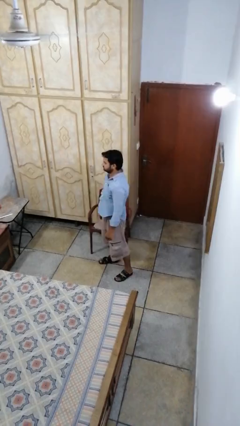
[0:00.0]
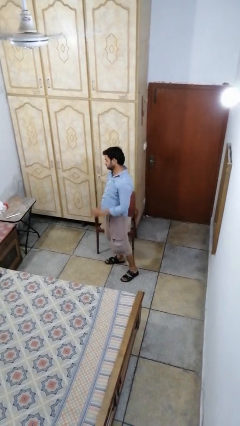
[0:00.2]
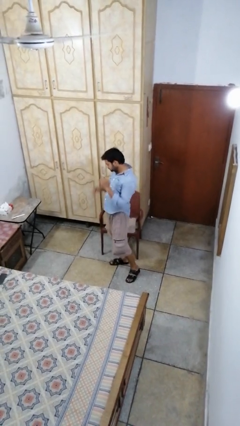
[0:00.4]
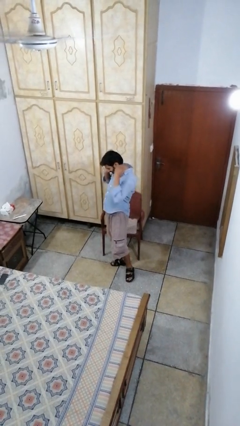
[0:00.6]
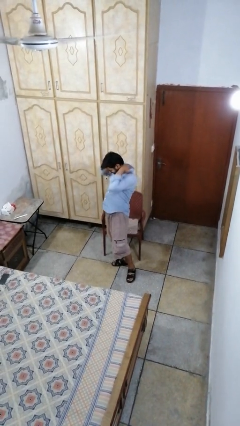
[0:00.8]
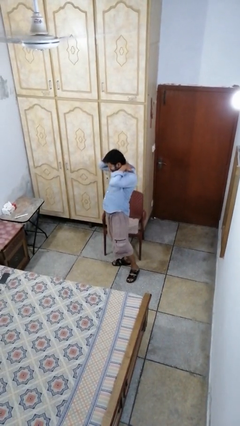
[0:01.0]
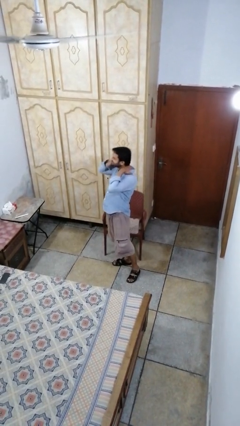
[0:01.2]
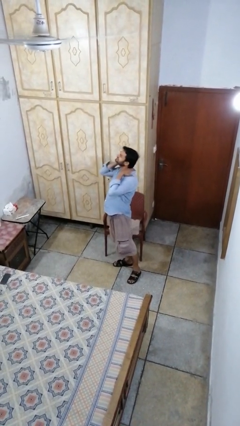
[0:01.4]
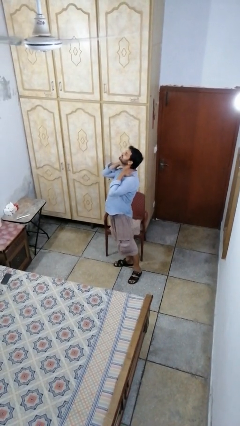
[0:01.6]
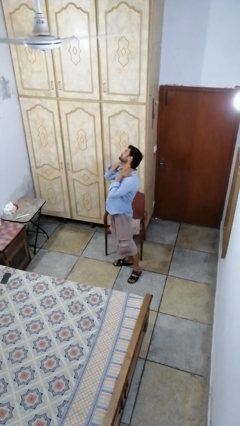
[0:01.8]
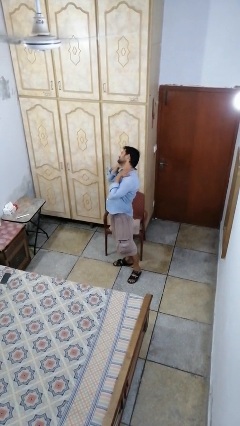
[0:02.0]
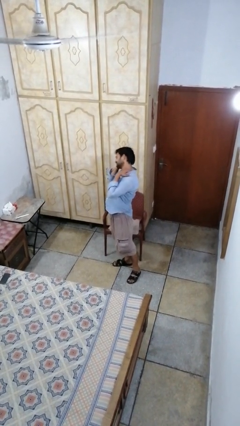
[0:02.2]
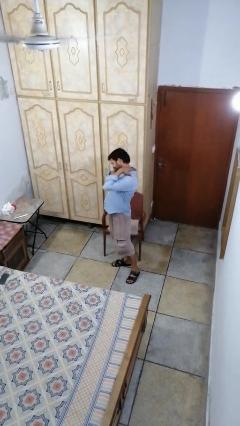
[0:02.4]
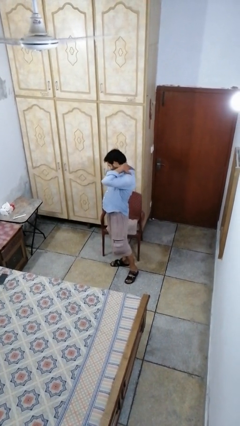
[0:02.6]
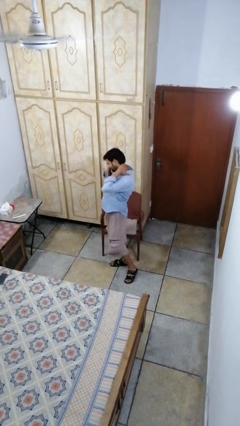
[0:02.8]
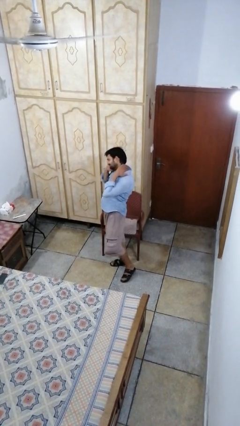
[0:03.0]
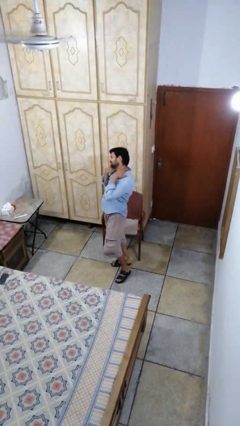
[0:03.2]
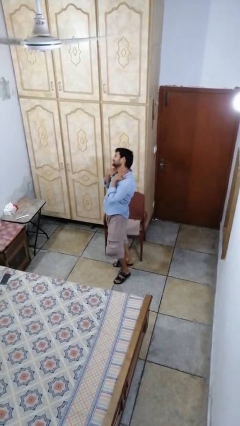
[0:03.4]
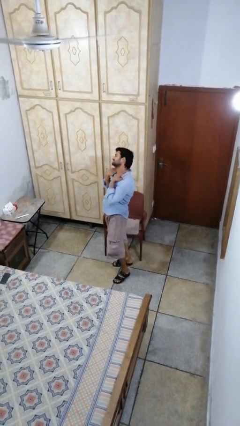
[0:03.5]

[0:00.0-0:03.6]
person rubs neck

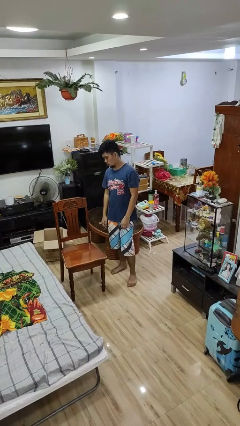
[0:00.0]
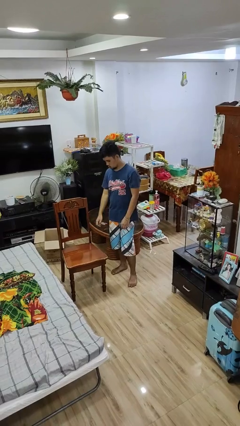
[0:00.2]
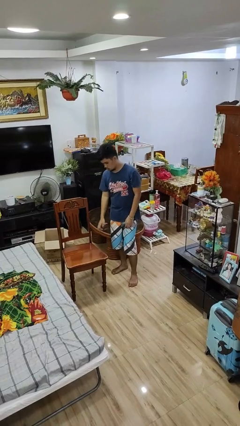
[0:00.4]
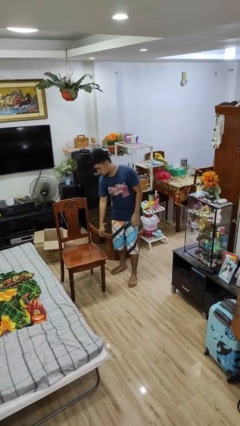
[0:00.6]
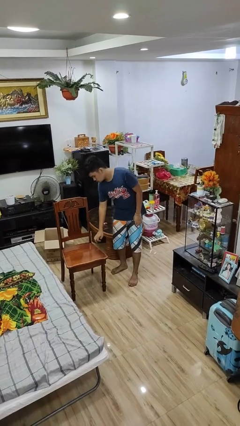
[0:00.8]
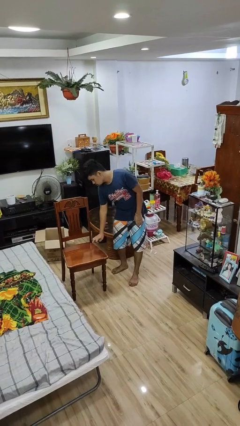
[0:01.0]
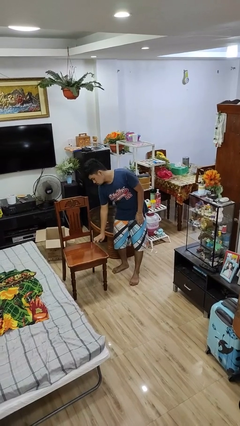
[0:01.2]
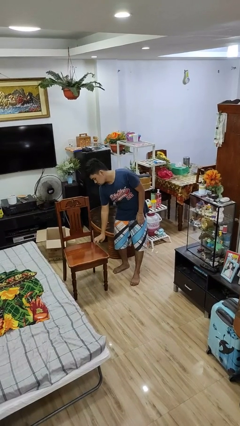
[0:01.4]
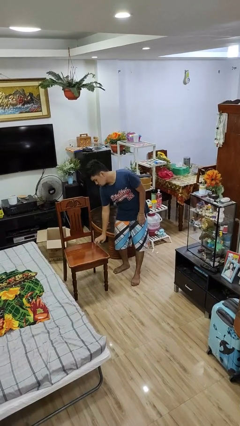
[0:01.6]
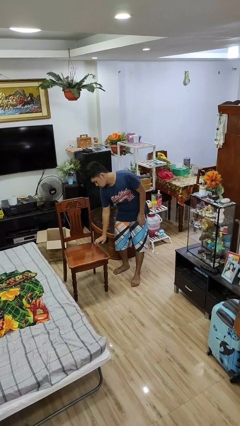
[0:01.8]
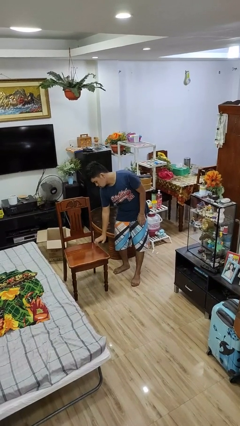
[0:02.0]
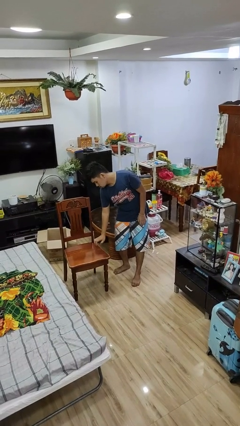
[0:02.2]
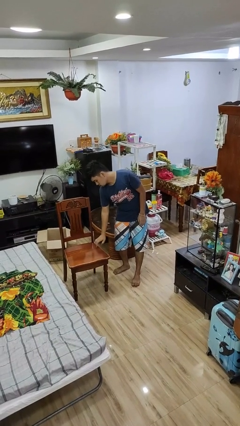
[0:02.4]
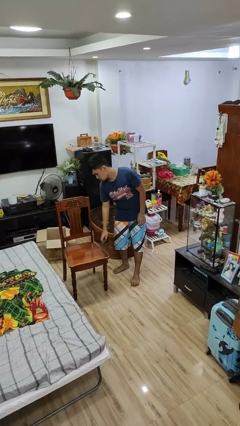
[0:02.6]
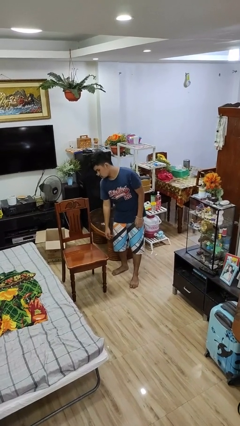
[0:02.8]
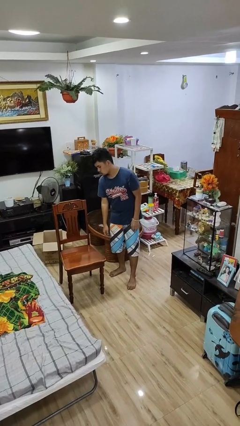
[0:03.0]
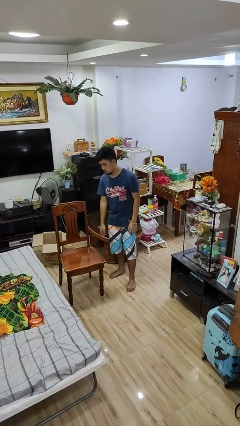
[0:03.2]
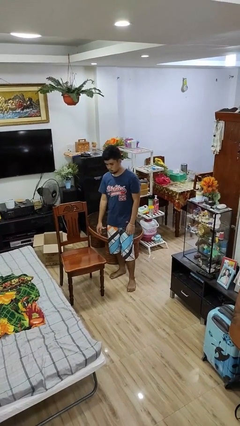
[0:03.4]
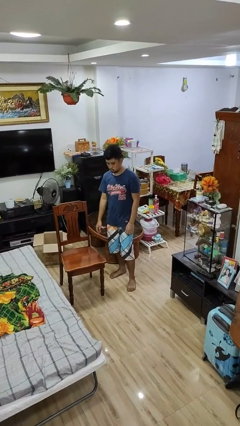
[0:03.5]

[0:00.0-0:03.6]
person taps object with finger

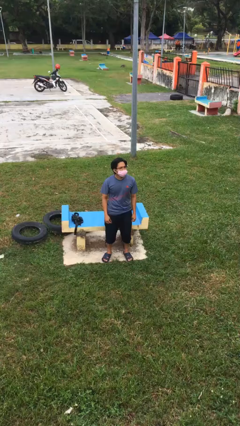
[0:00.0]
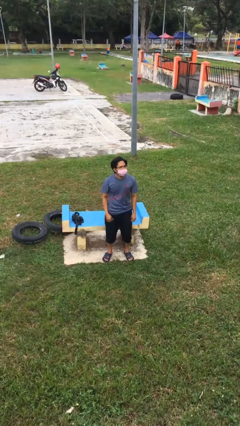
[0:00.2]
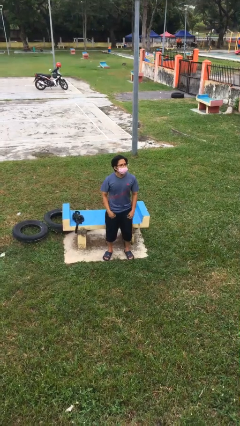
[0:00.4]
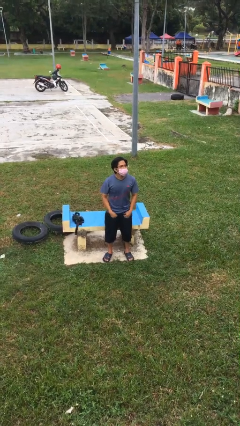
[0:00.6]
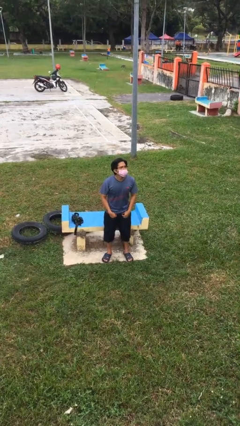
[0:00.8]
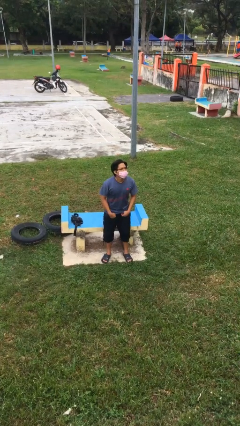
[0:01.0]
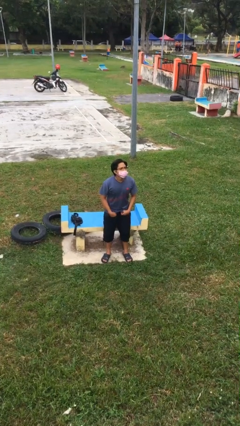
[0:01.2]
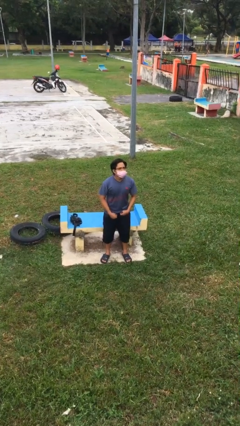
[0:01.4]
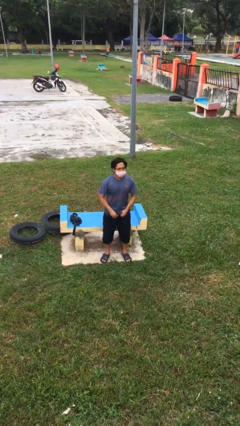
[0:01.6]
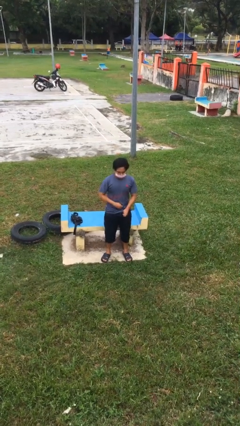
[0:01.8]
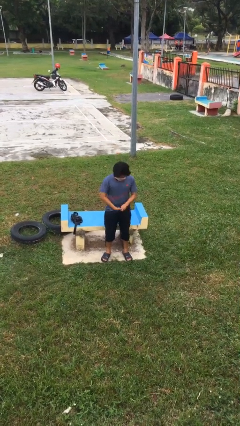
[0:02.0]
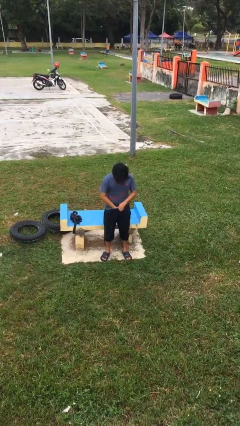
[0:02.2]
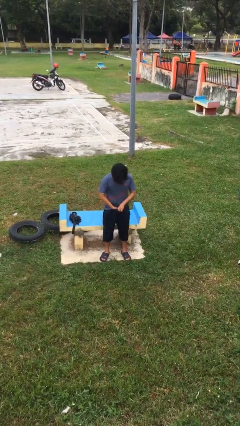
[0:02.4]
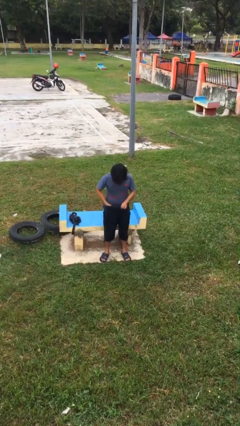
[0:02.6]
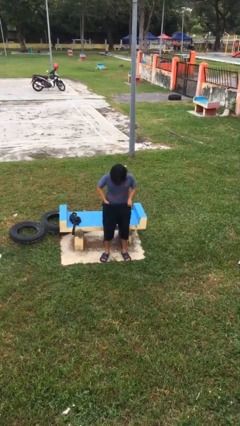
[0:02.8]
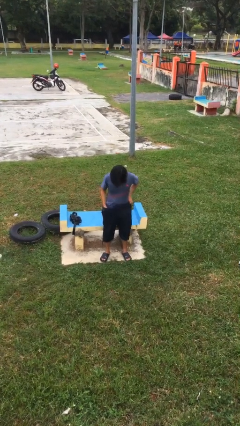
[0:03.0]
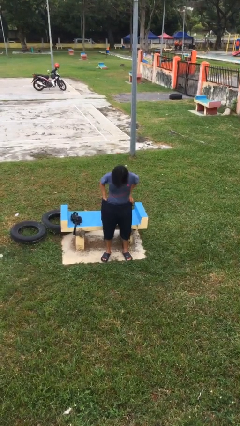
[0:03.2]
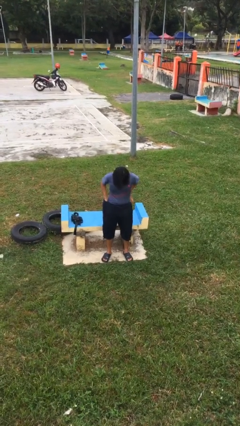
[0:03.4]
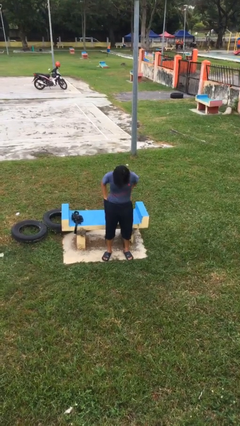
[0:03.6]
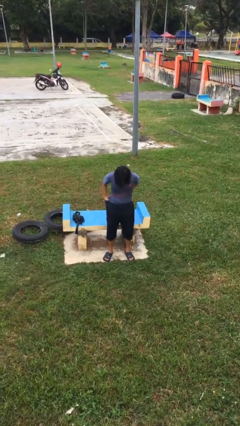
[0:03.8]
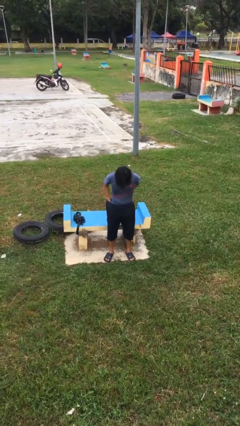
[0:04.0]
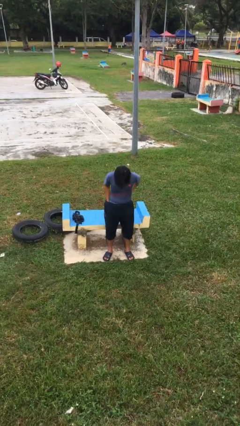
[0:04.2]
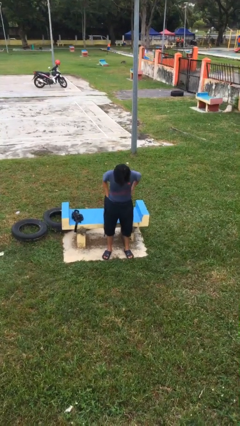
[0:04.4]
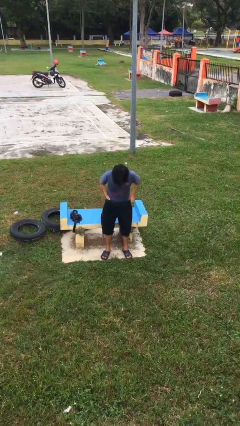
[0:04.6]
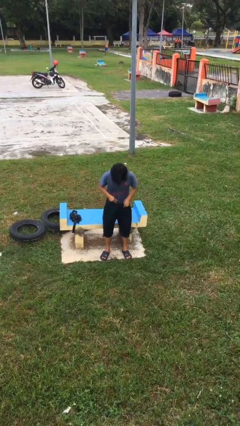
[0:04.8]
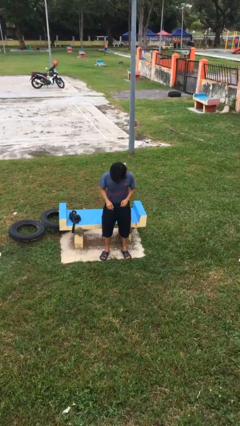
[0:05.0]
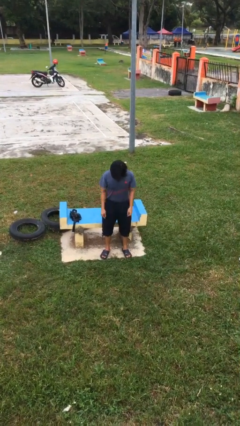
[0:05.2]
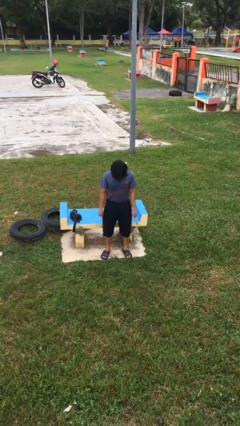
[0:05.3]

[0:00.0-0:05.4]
person tucks in shirt

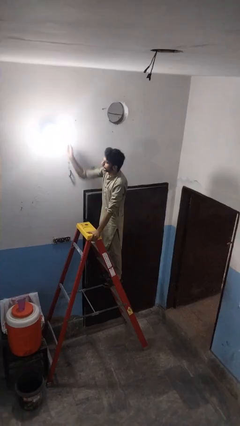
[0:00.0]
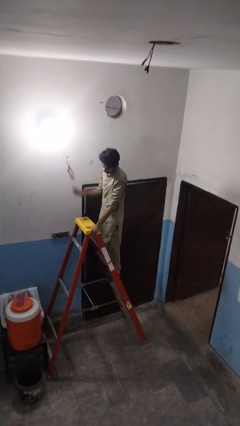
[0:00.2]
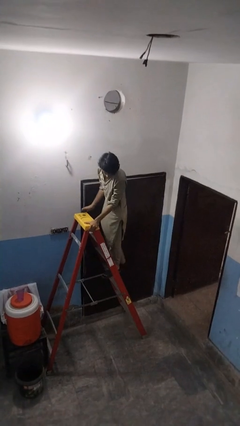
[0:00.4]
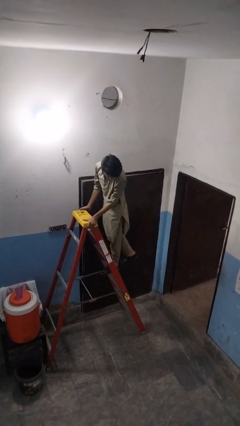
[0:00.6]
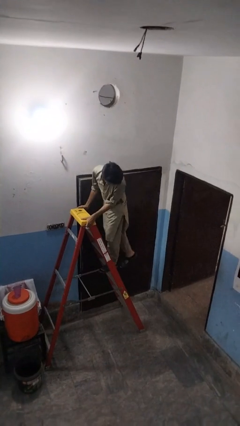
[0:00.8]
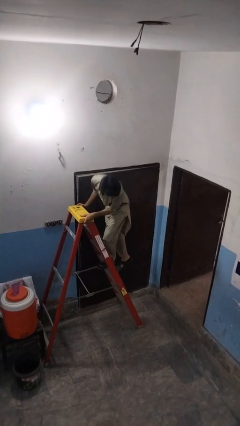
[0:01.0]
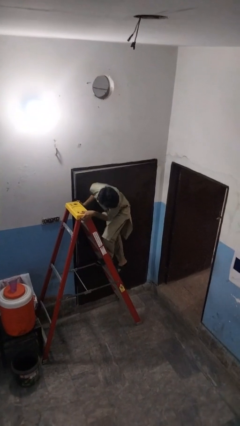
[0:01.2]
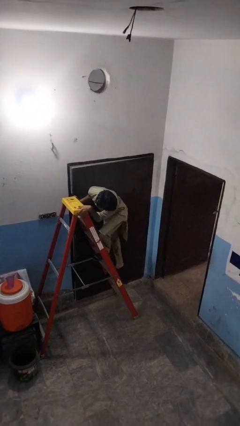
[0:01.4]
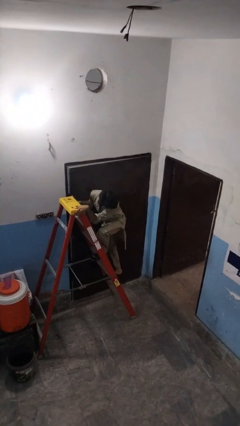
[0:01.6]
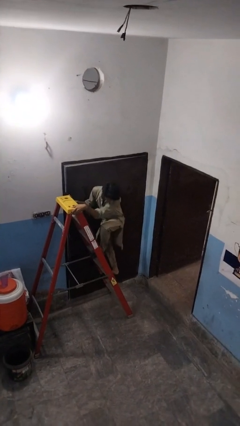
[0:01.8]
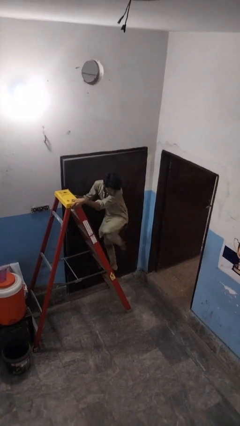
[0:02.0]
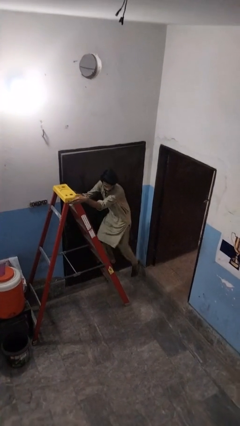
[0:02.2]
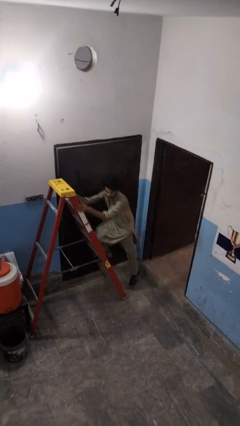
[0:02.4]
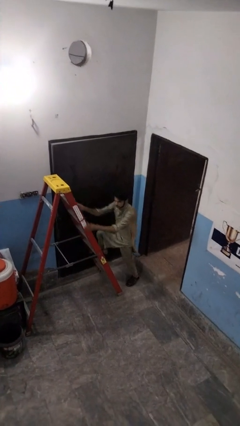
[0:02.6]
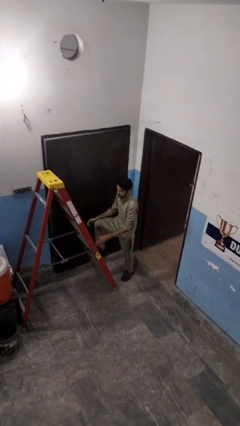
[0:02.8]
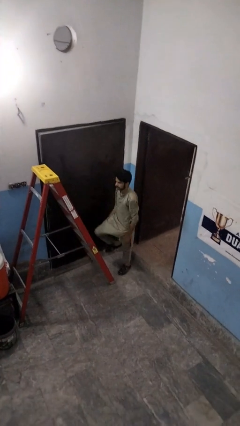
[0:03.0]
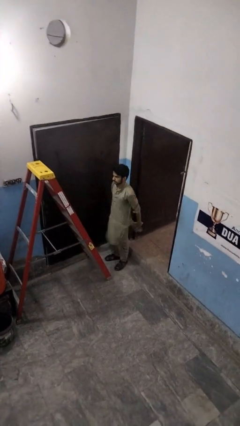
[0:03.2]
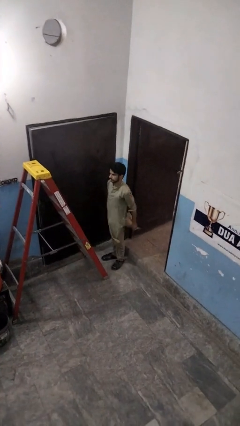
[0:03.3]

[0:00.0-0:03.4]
person climbs down ladder

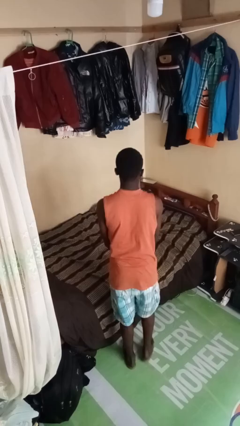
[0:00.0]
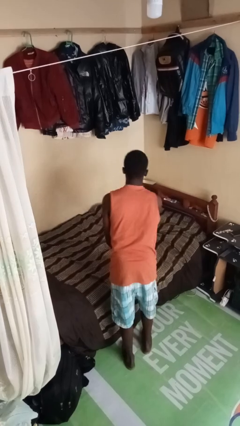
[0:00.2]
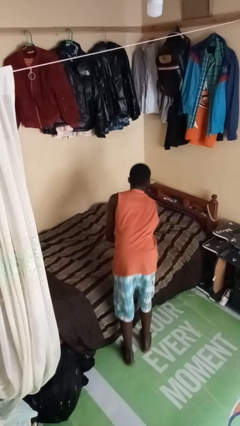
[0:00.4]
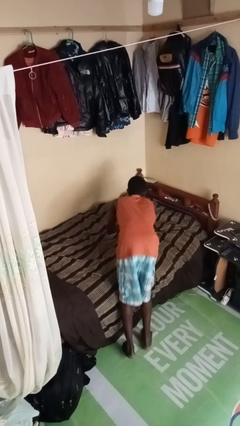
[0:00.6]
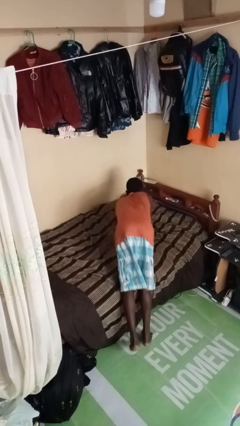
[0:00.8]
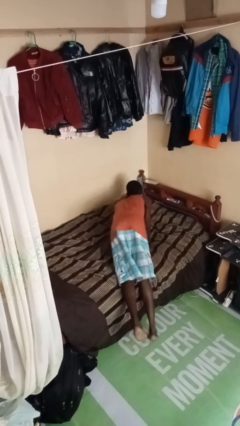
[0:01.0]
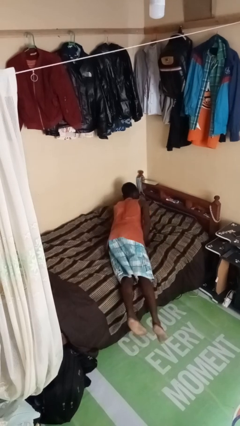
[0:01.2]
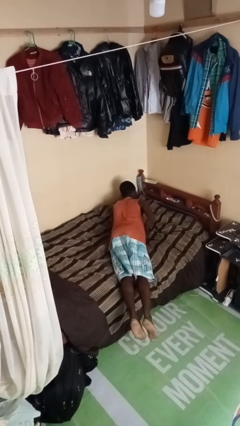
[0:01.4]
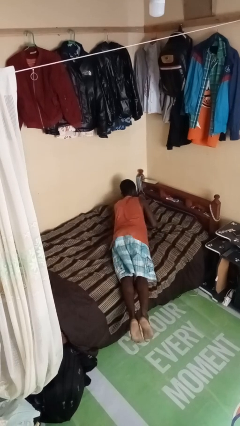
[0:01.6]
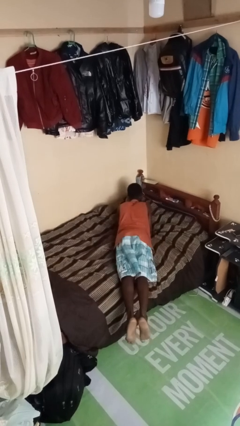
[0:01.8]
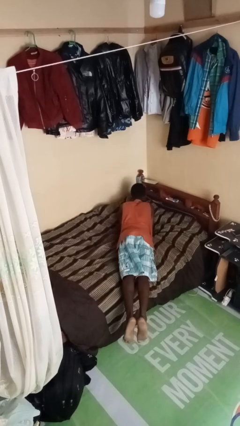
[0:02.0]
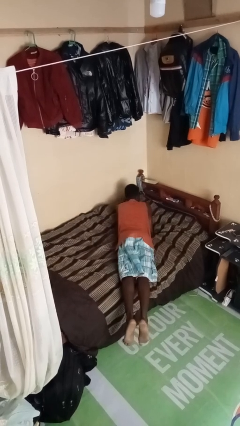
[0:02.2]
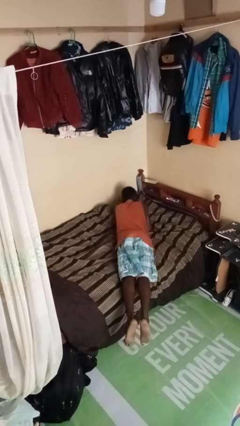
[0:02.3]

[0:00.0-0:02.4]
person lies down on bed
